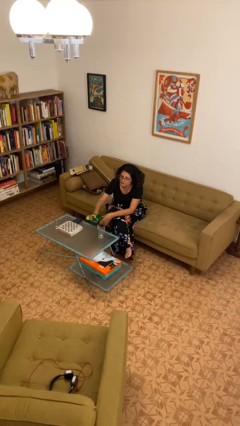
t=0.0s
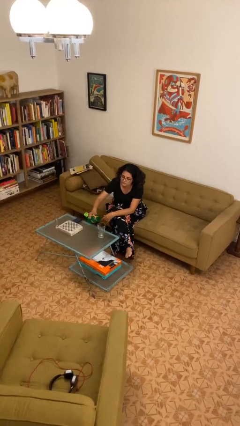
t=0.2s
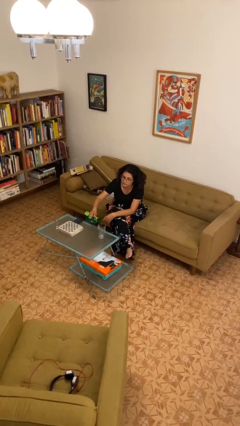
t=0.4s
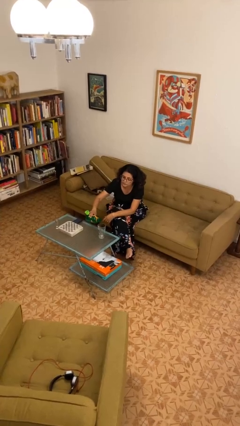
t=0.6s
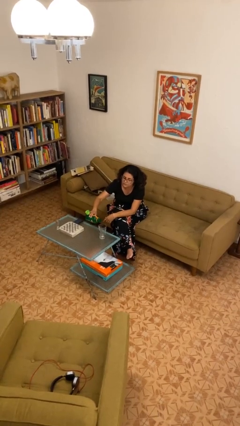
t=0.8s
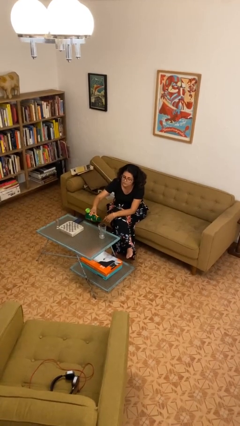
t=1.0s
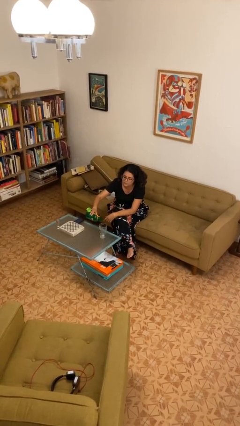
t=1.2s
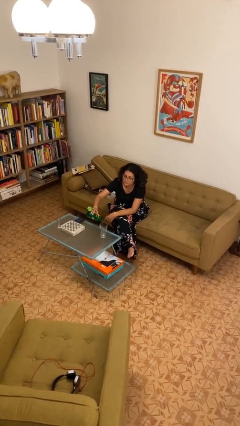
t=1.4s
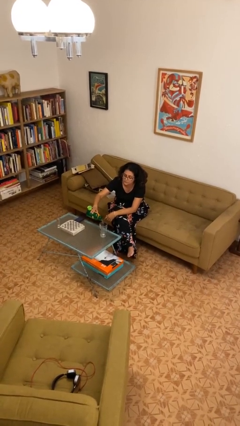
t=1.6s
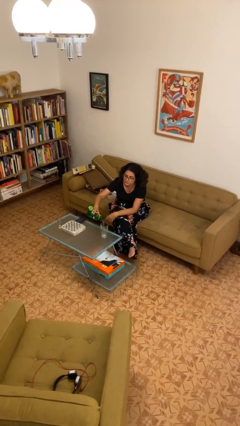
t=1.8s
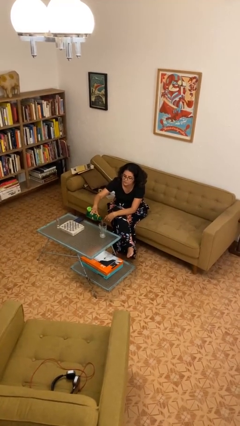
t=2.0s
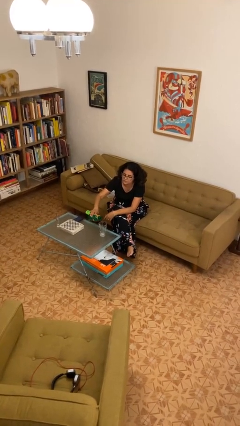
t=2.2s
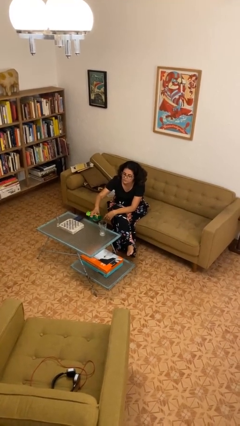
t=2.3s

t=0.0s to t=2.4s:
person pours liquid into cup

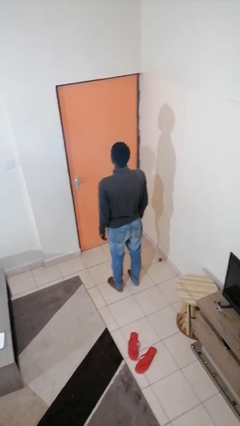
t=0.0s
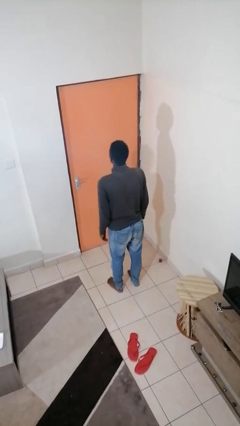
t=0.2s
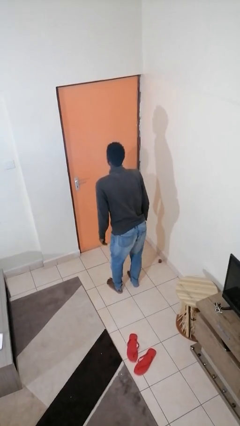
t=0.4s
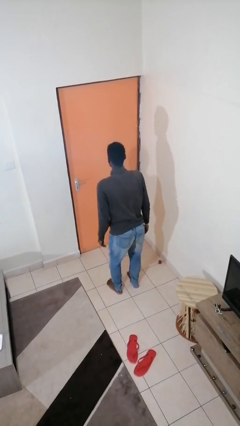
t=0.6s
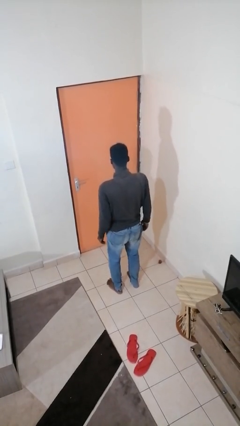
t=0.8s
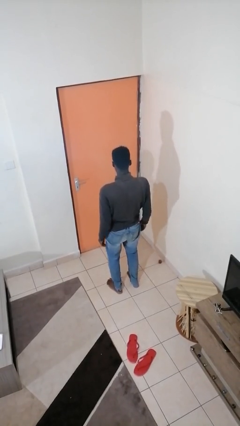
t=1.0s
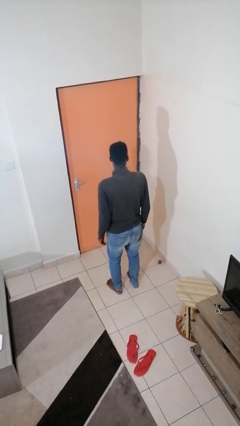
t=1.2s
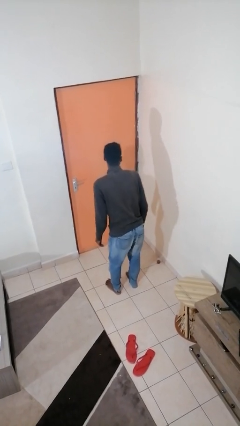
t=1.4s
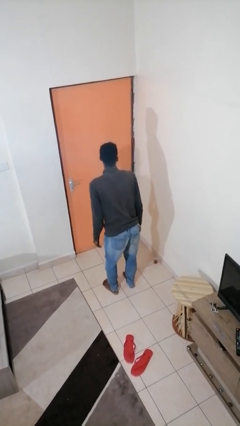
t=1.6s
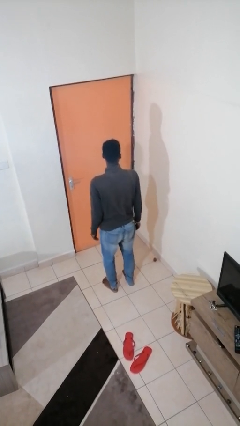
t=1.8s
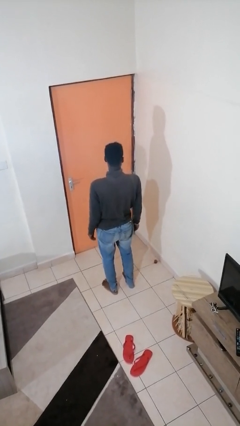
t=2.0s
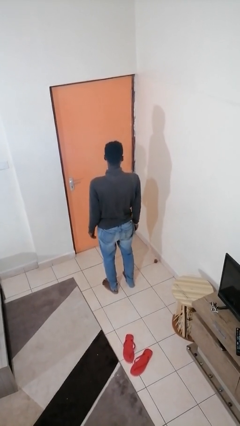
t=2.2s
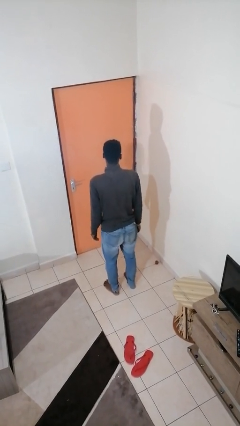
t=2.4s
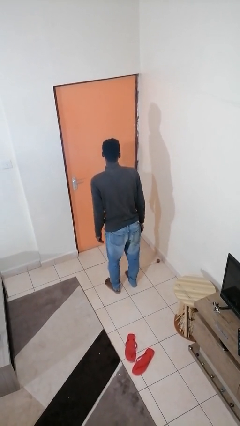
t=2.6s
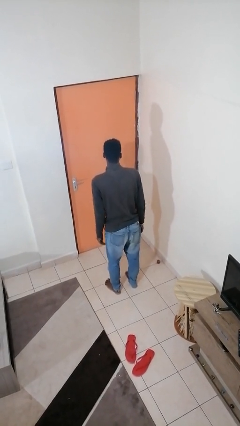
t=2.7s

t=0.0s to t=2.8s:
person wiggles hips

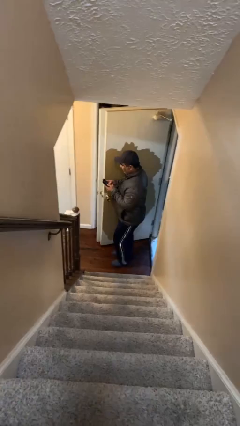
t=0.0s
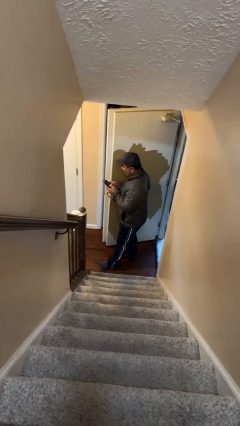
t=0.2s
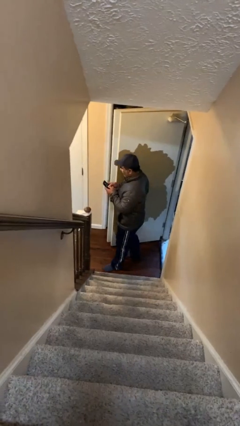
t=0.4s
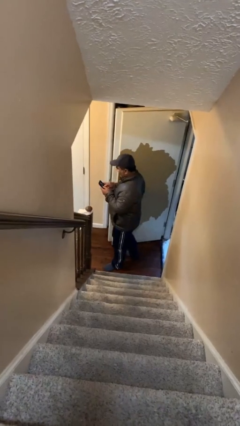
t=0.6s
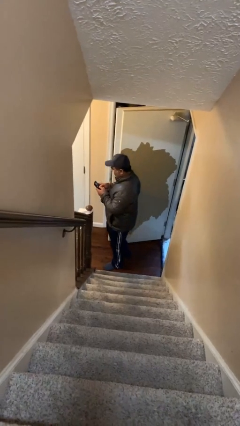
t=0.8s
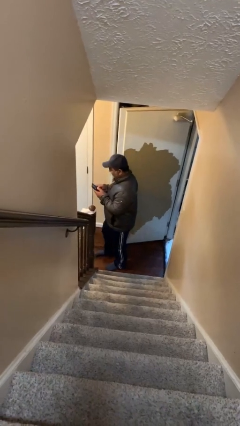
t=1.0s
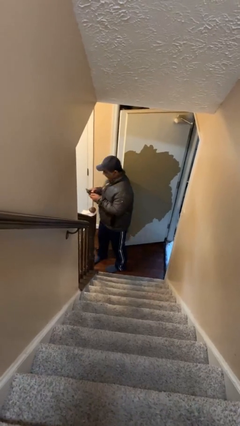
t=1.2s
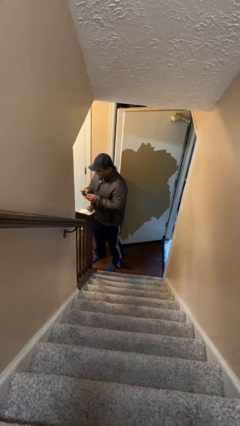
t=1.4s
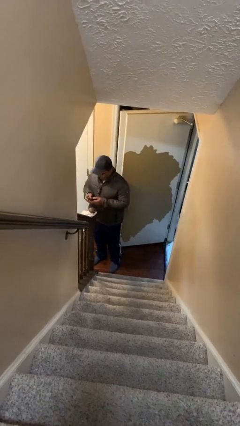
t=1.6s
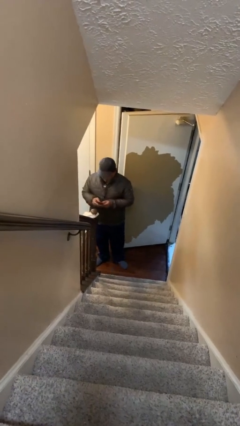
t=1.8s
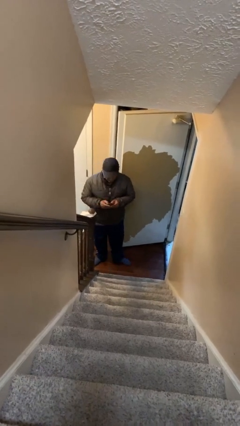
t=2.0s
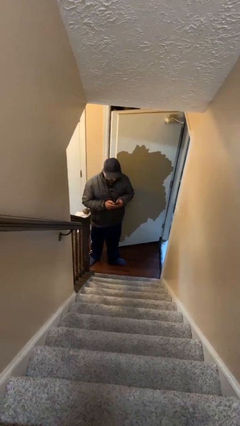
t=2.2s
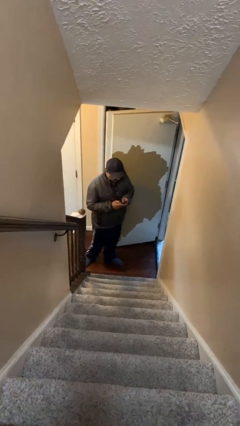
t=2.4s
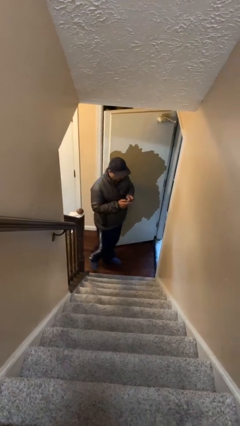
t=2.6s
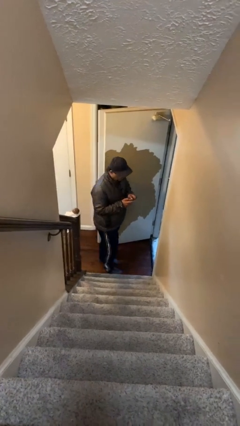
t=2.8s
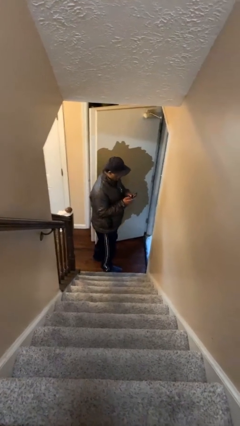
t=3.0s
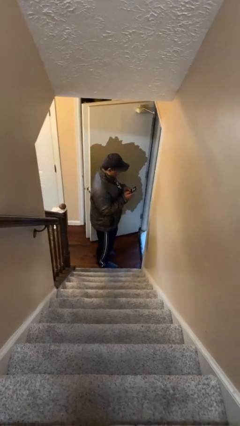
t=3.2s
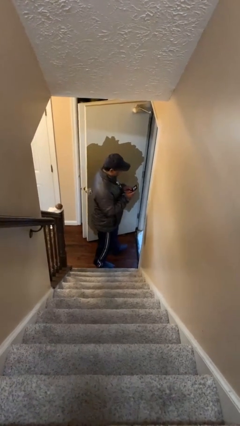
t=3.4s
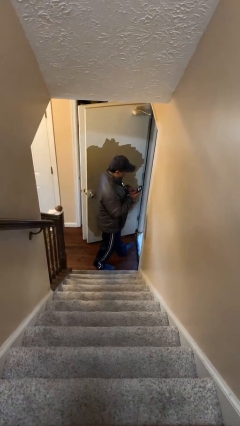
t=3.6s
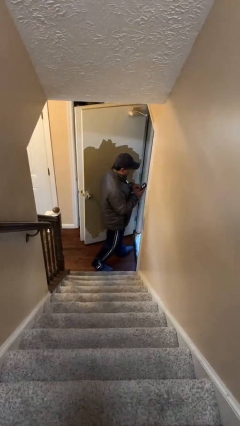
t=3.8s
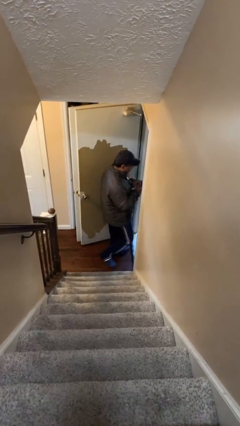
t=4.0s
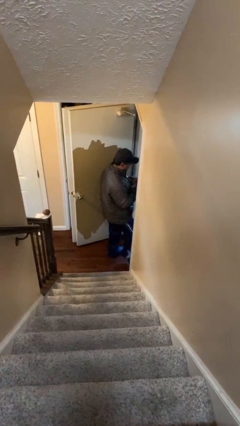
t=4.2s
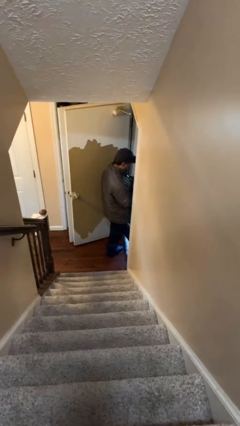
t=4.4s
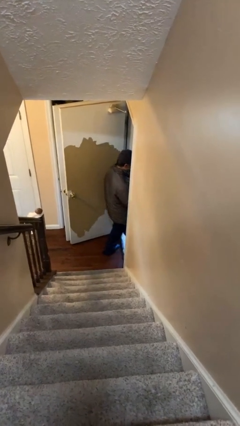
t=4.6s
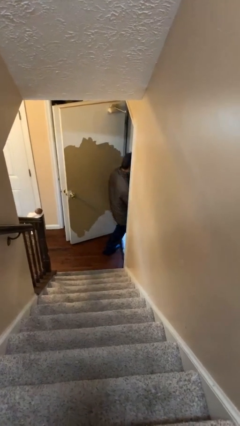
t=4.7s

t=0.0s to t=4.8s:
person exits scene through structure

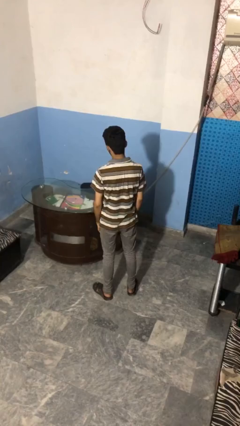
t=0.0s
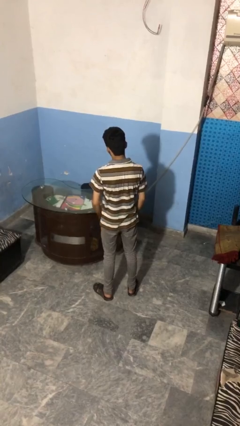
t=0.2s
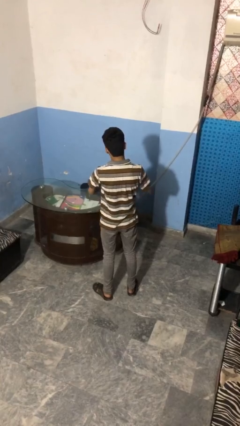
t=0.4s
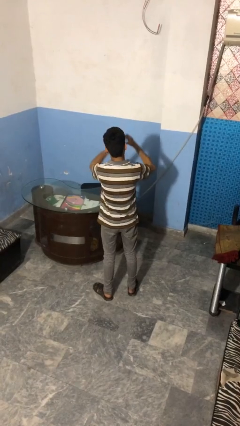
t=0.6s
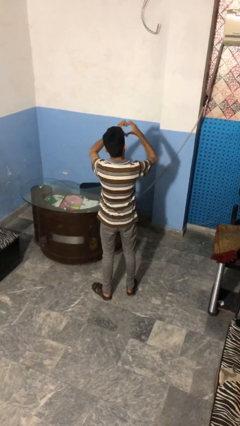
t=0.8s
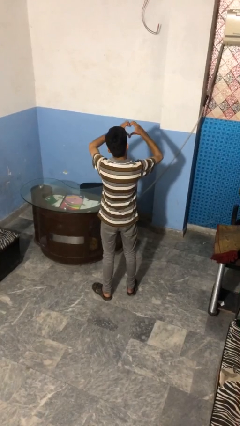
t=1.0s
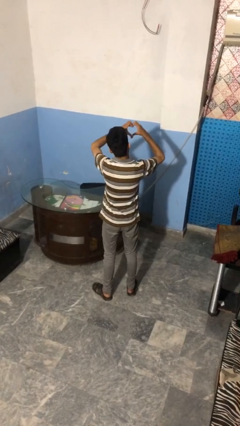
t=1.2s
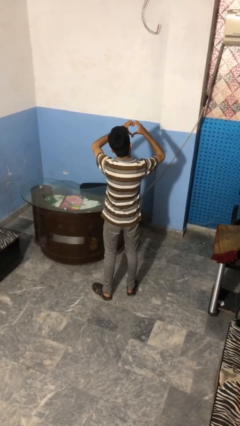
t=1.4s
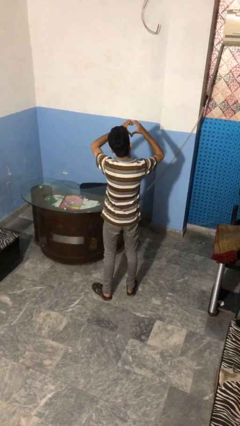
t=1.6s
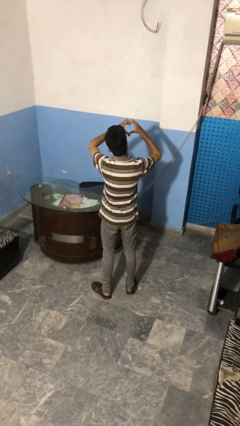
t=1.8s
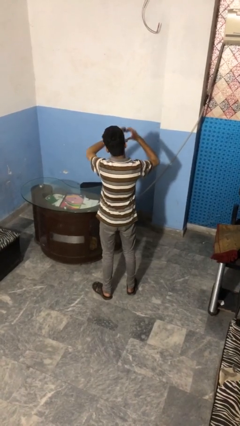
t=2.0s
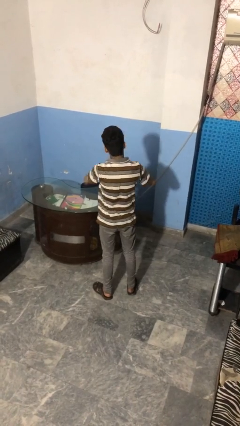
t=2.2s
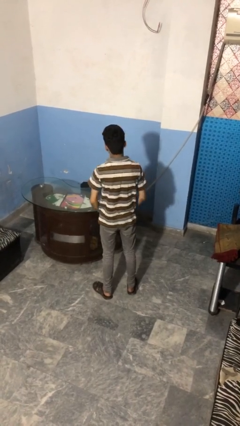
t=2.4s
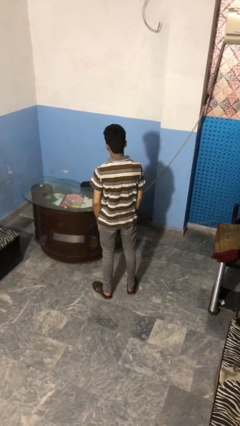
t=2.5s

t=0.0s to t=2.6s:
person gestures heart

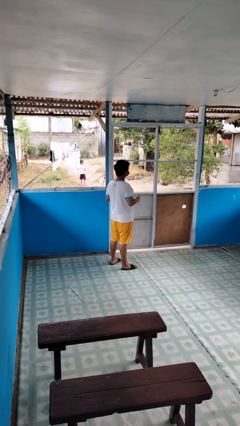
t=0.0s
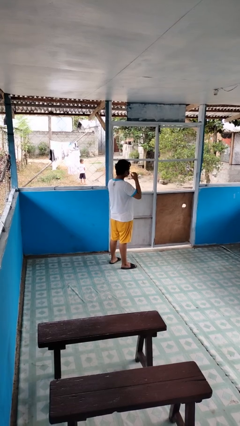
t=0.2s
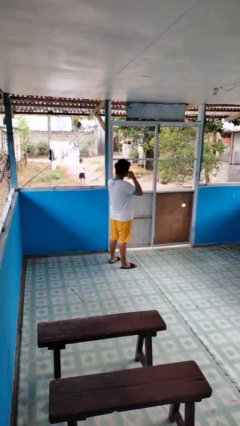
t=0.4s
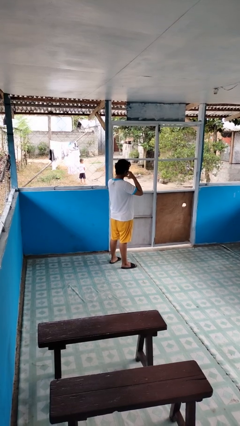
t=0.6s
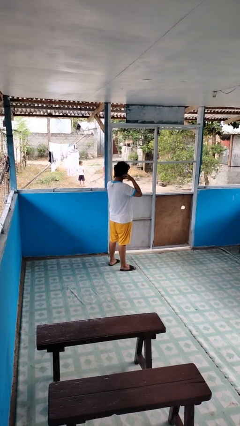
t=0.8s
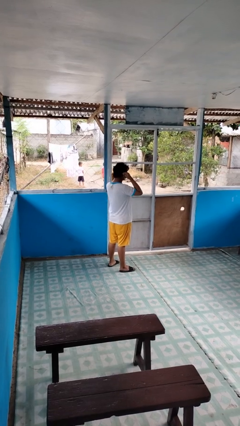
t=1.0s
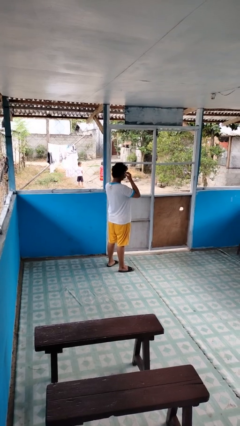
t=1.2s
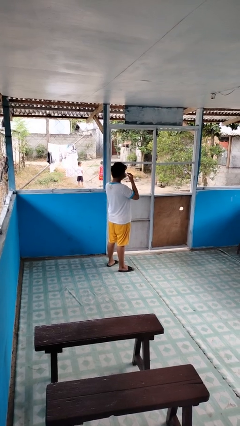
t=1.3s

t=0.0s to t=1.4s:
person takes off facemask

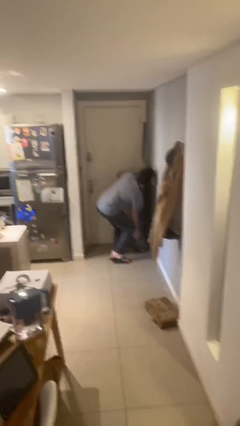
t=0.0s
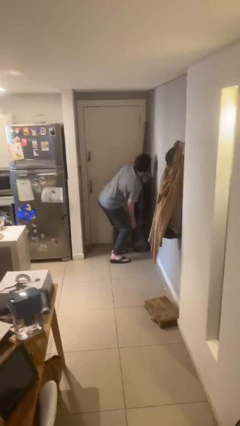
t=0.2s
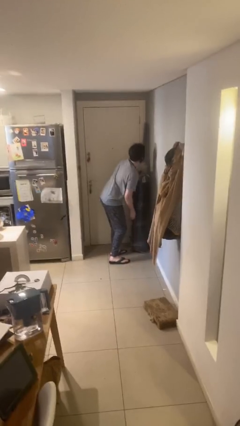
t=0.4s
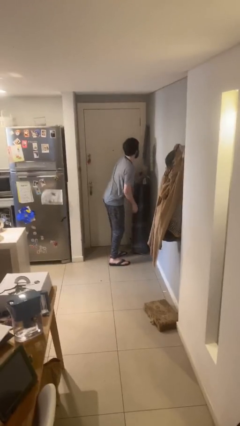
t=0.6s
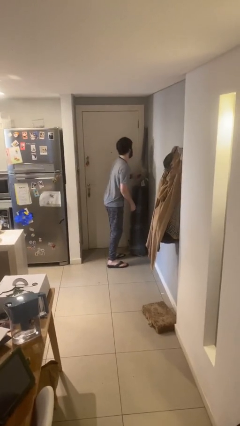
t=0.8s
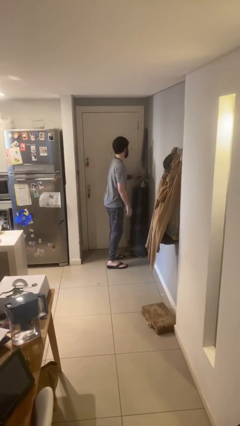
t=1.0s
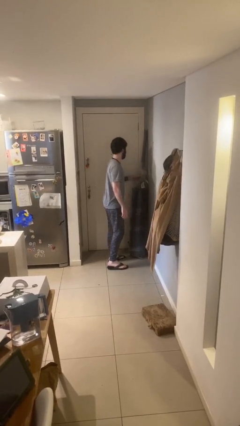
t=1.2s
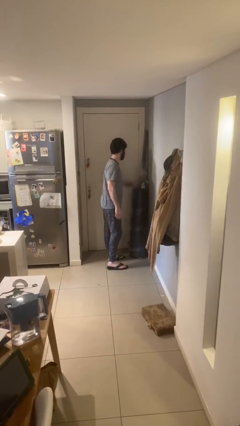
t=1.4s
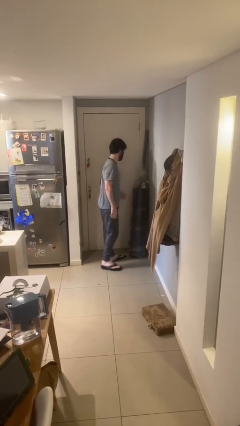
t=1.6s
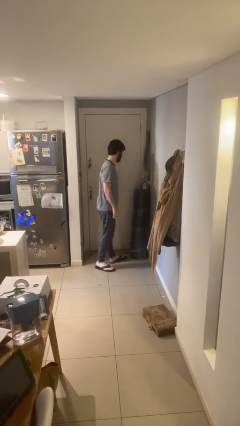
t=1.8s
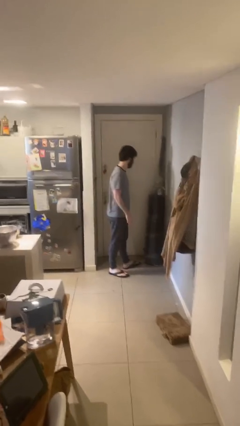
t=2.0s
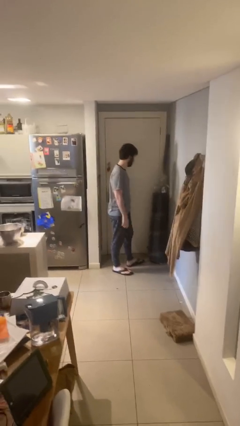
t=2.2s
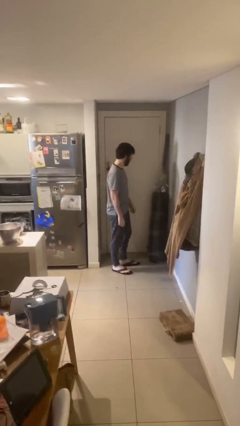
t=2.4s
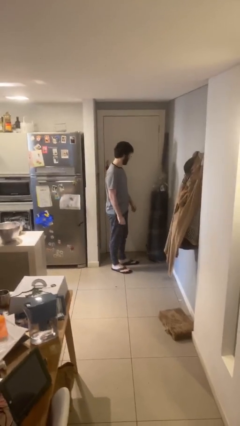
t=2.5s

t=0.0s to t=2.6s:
person puts down object on floor

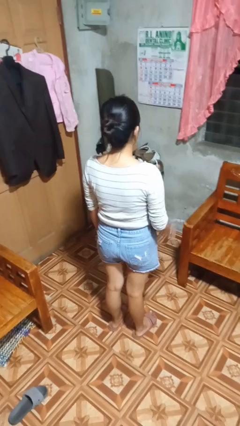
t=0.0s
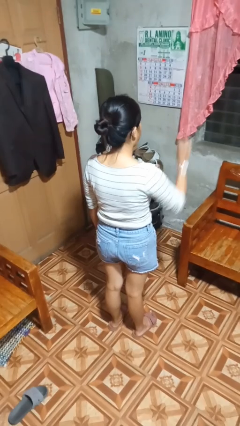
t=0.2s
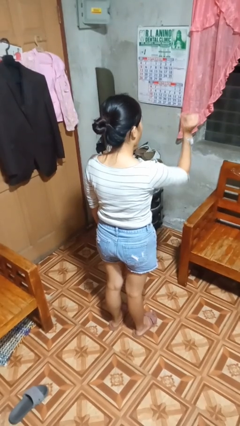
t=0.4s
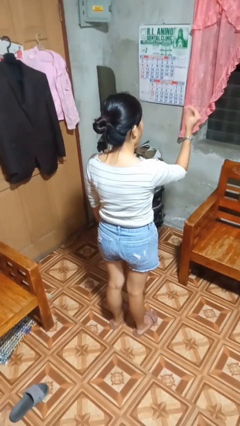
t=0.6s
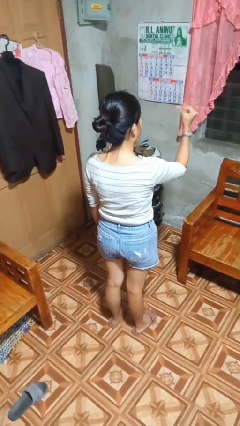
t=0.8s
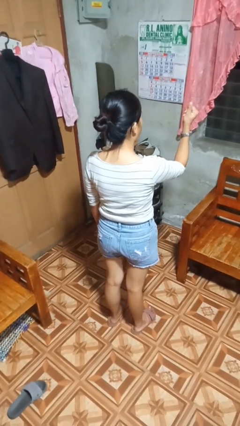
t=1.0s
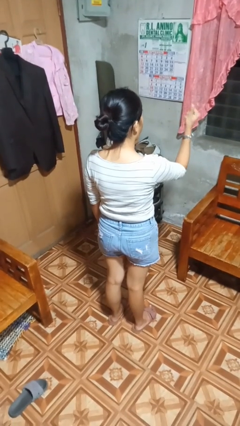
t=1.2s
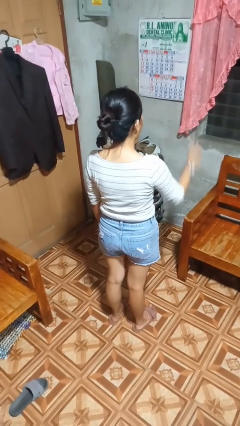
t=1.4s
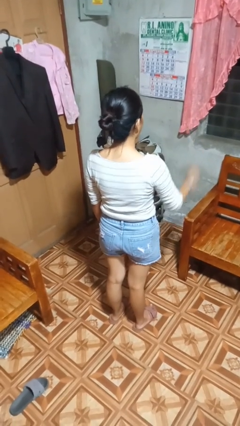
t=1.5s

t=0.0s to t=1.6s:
person snaps fingers
